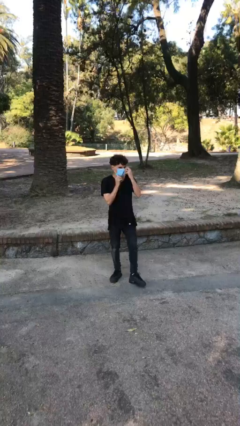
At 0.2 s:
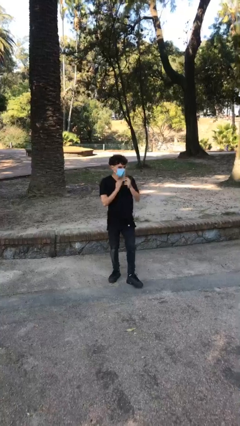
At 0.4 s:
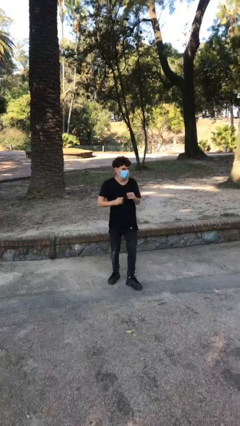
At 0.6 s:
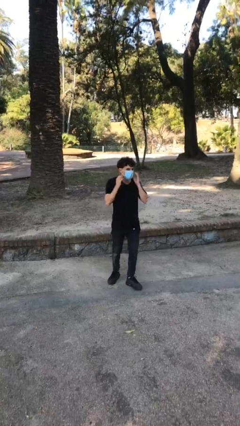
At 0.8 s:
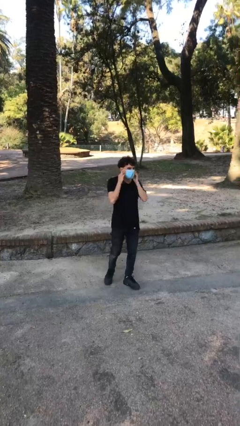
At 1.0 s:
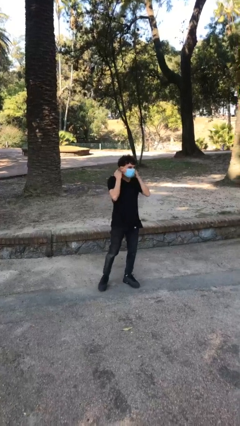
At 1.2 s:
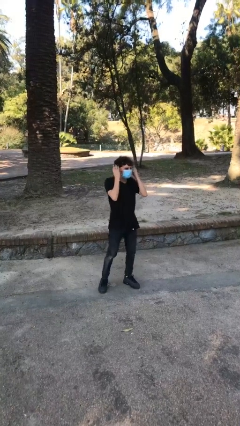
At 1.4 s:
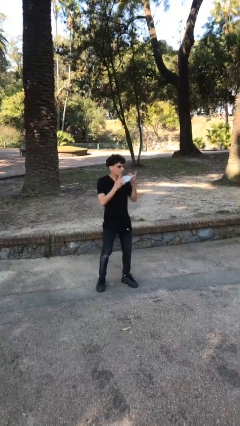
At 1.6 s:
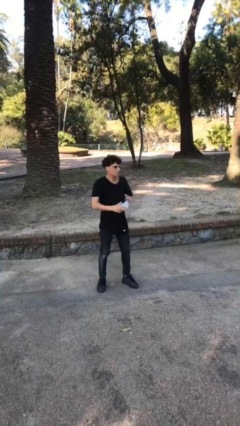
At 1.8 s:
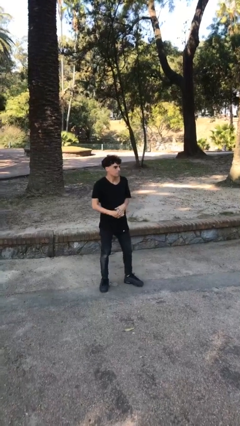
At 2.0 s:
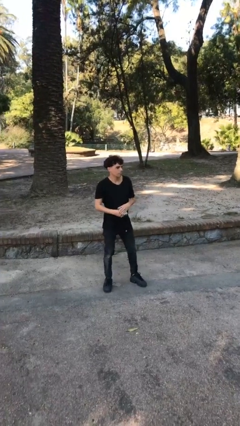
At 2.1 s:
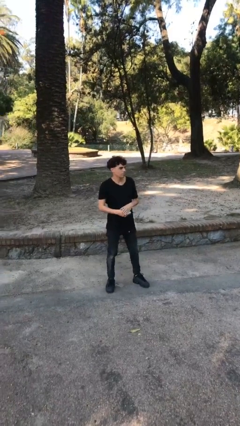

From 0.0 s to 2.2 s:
person takes off facemask

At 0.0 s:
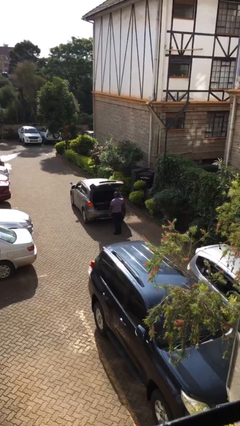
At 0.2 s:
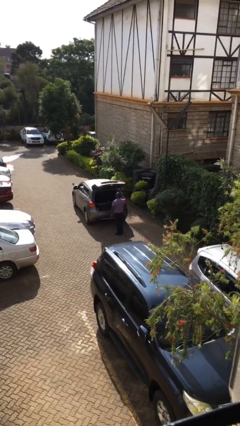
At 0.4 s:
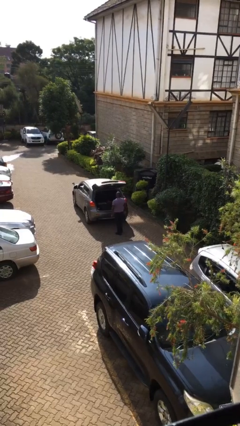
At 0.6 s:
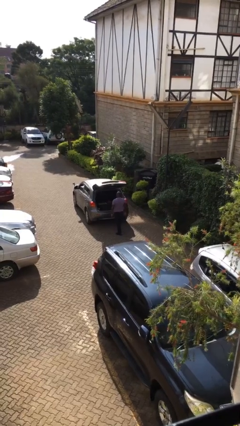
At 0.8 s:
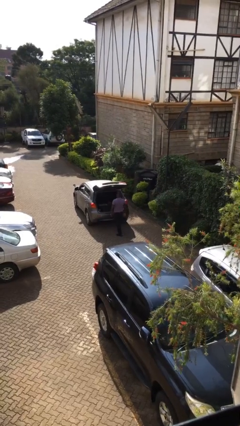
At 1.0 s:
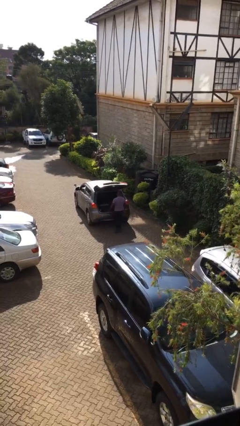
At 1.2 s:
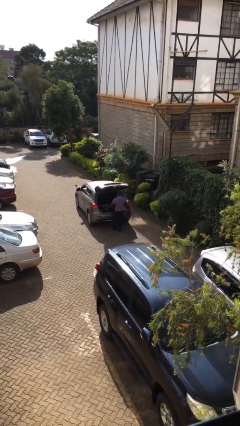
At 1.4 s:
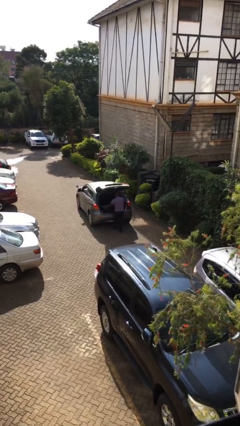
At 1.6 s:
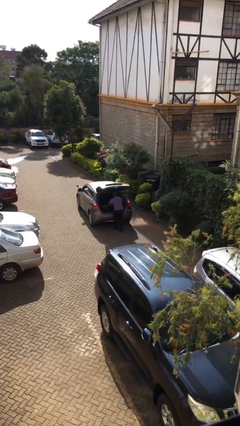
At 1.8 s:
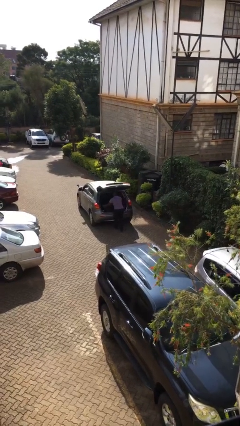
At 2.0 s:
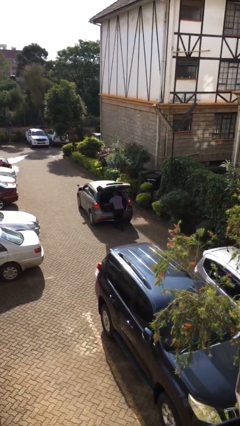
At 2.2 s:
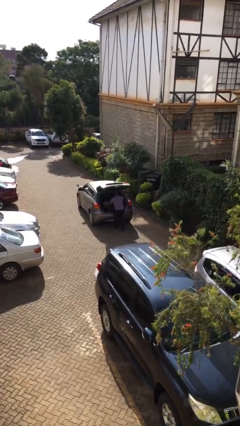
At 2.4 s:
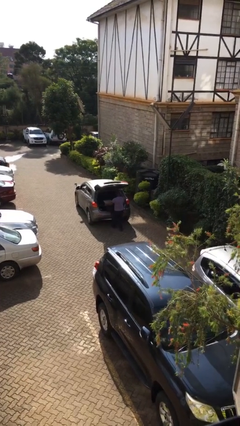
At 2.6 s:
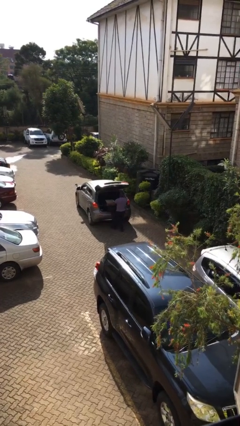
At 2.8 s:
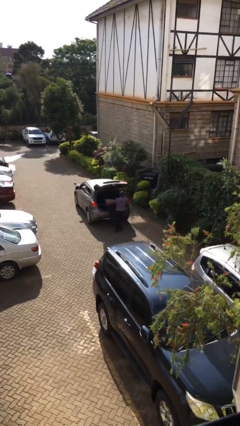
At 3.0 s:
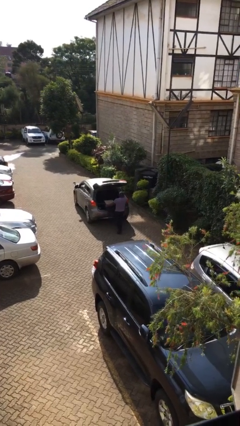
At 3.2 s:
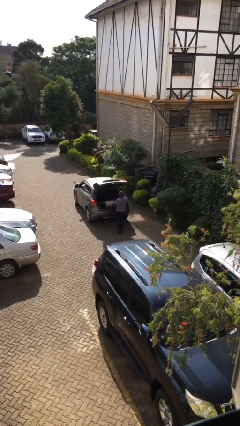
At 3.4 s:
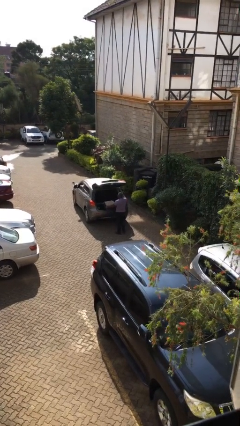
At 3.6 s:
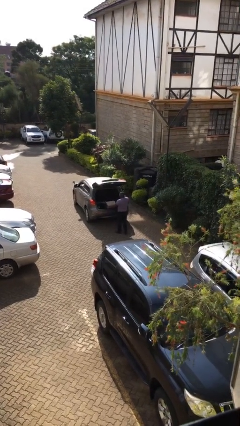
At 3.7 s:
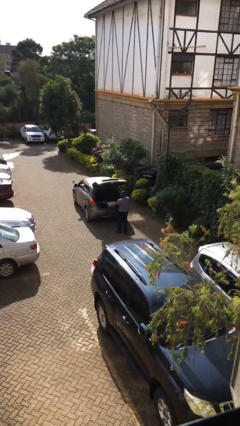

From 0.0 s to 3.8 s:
person unloads car

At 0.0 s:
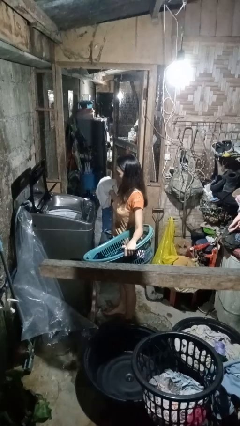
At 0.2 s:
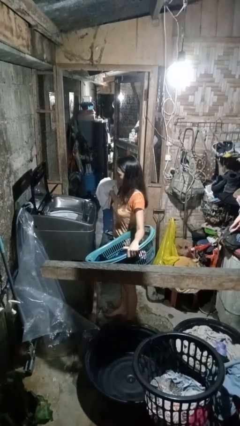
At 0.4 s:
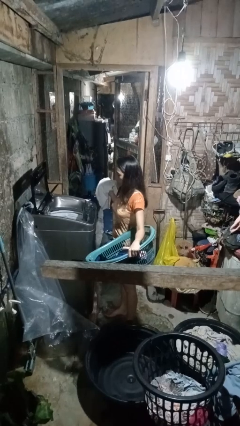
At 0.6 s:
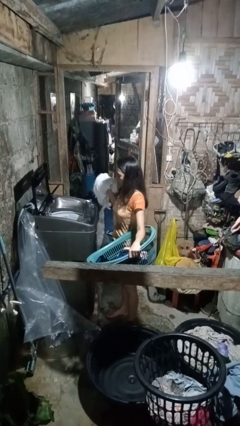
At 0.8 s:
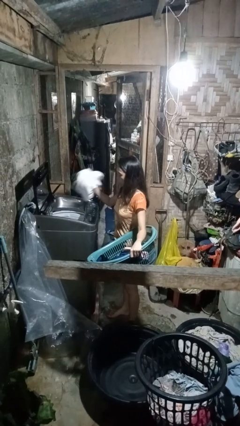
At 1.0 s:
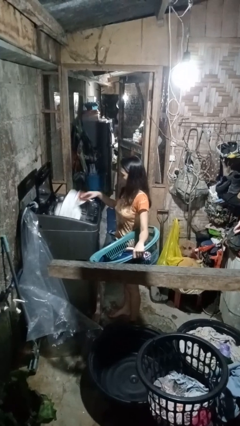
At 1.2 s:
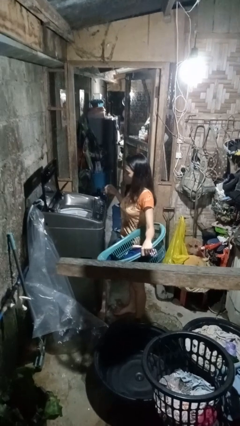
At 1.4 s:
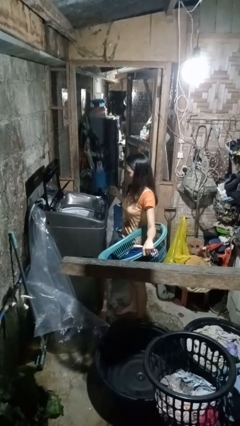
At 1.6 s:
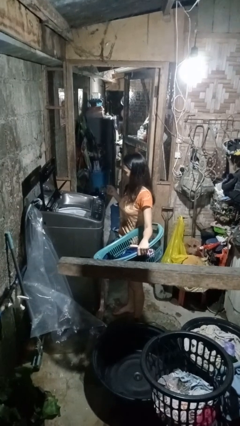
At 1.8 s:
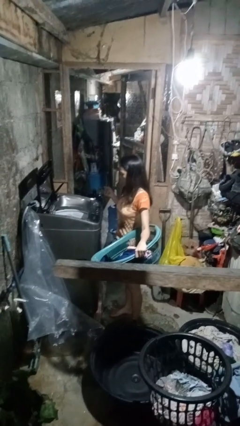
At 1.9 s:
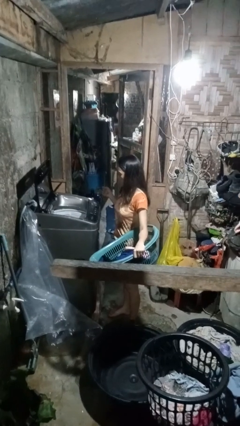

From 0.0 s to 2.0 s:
person loads clotheswasher

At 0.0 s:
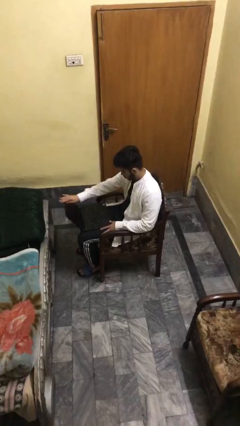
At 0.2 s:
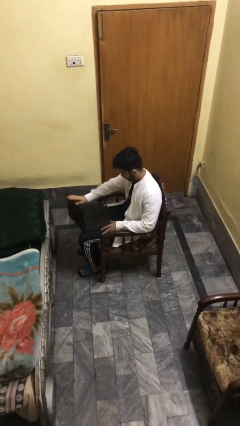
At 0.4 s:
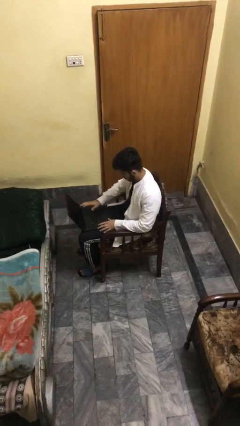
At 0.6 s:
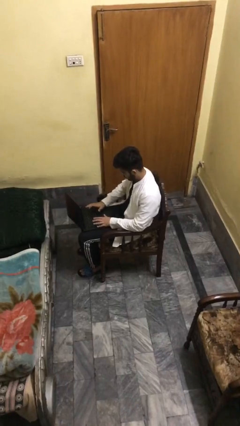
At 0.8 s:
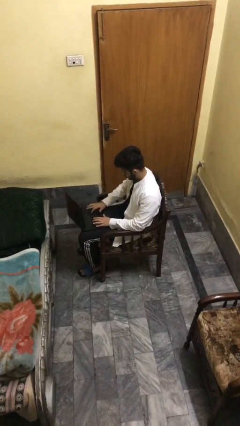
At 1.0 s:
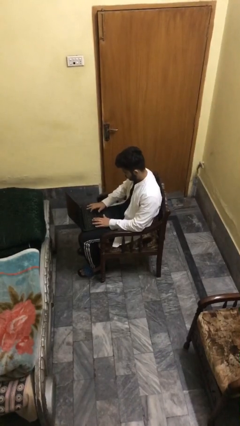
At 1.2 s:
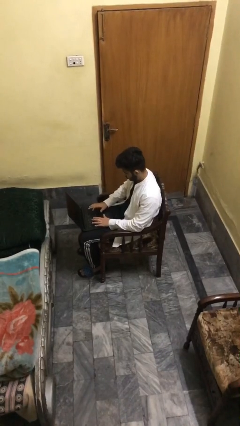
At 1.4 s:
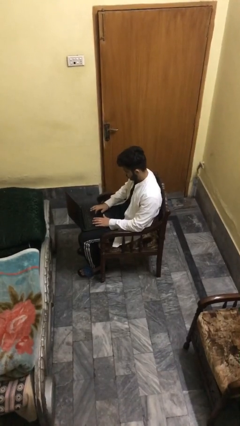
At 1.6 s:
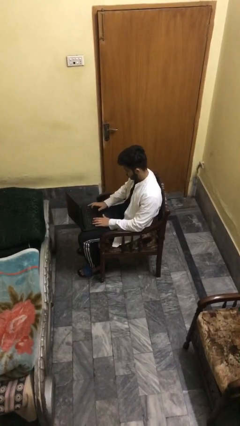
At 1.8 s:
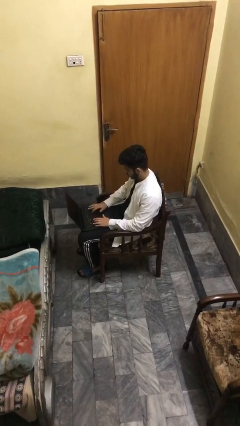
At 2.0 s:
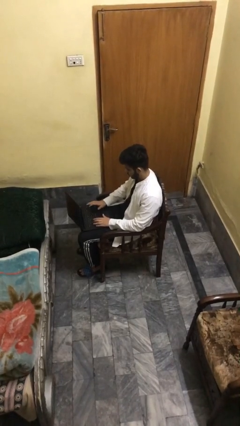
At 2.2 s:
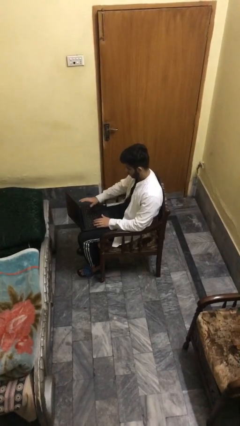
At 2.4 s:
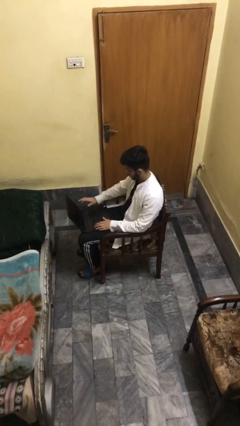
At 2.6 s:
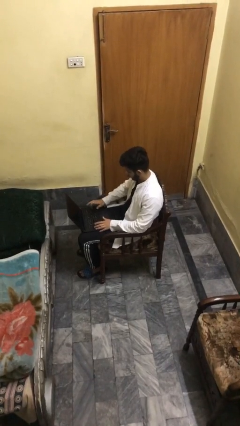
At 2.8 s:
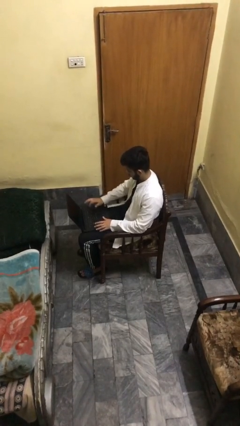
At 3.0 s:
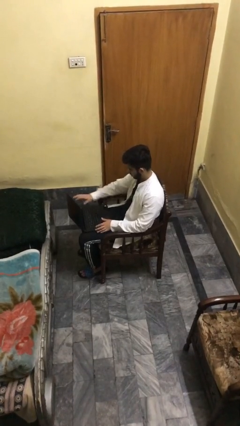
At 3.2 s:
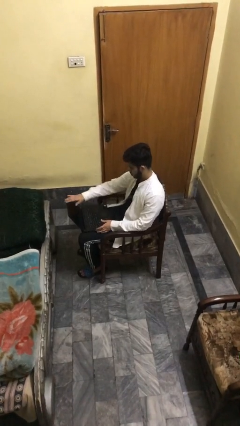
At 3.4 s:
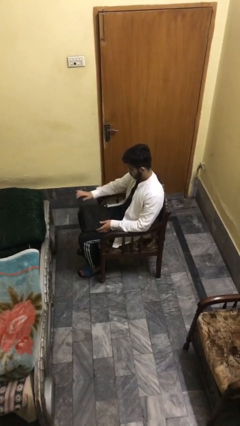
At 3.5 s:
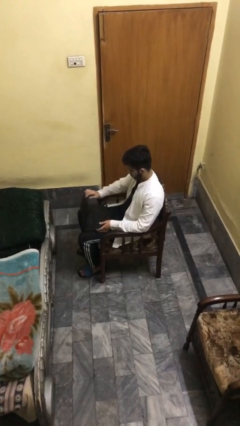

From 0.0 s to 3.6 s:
person interacts with laptop

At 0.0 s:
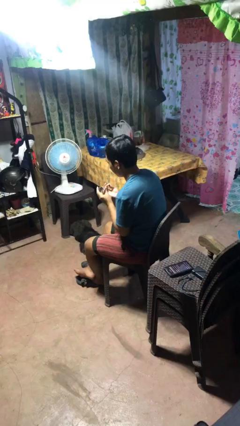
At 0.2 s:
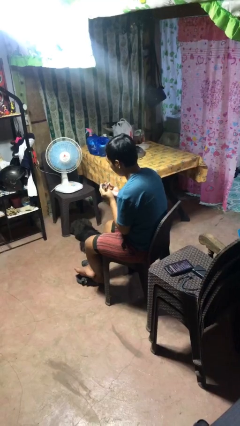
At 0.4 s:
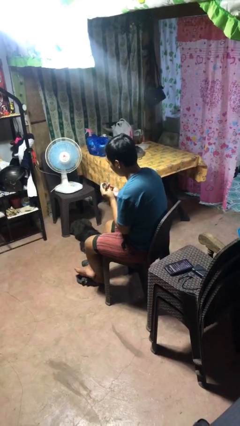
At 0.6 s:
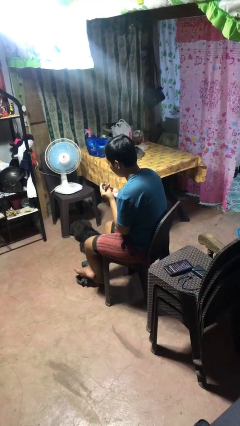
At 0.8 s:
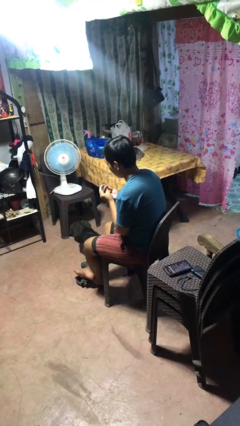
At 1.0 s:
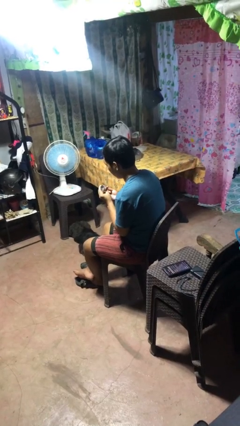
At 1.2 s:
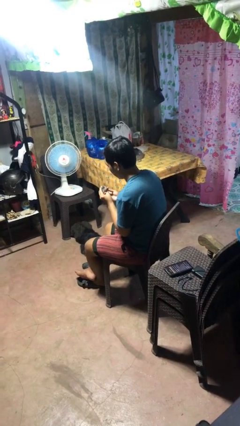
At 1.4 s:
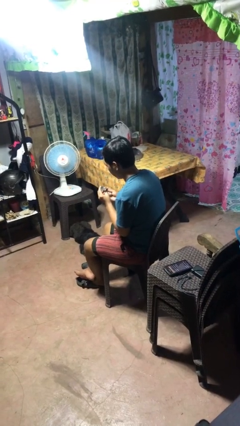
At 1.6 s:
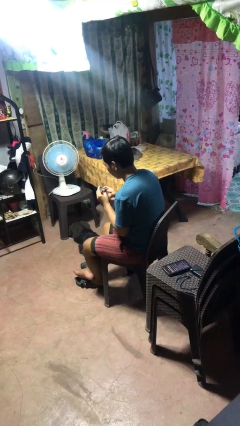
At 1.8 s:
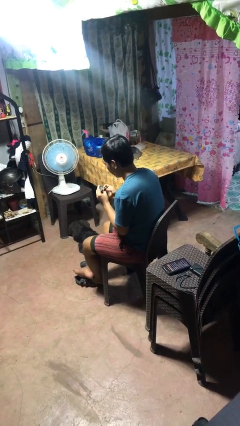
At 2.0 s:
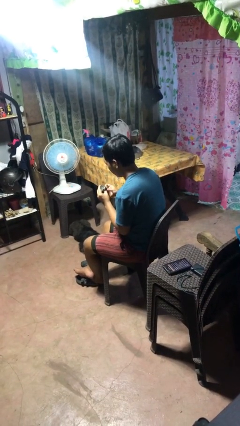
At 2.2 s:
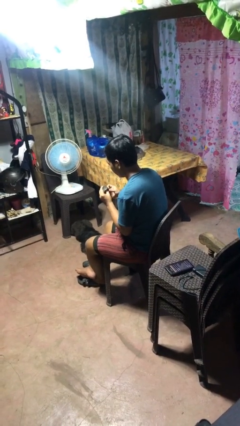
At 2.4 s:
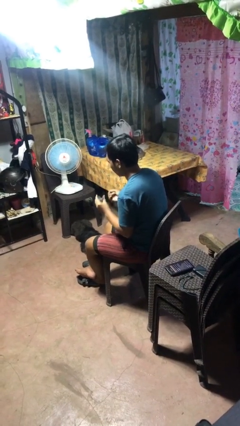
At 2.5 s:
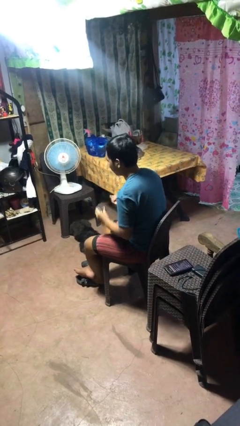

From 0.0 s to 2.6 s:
person clips fingernails

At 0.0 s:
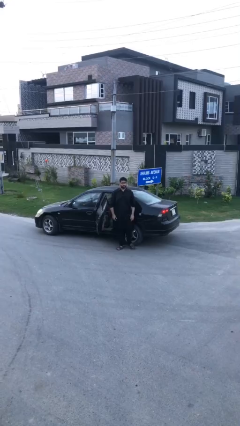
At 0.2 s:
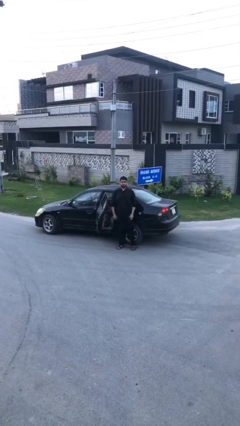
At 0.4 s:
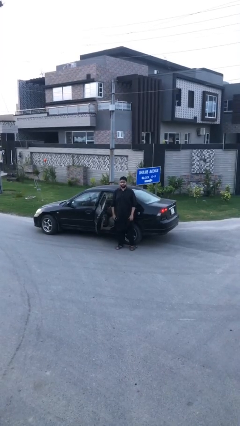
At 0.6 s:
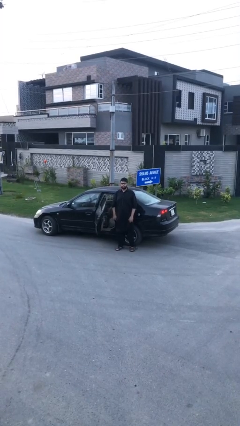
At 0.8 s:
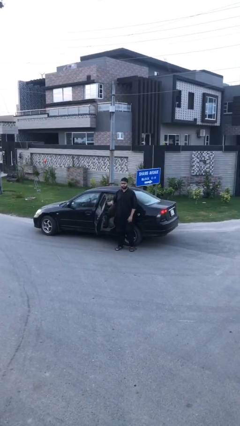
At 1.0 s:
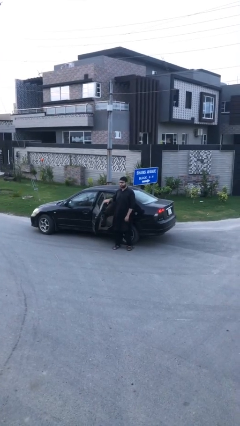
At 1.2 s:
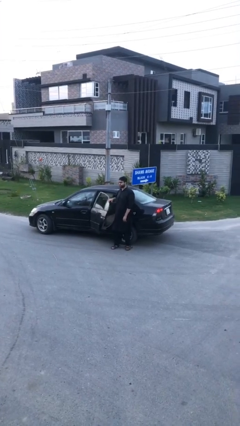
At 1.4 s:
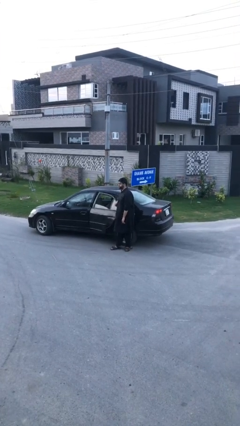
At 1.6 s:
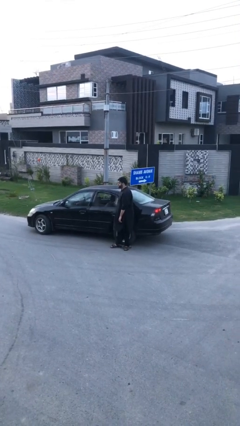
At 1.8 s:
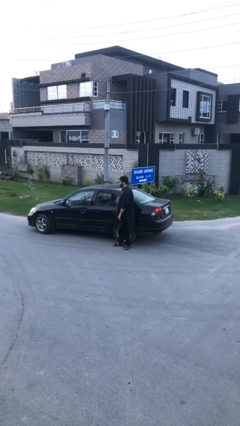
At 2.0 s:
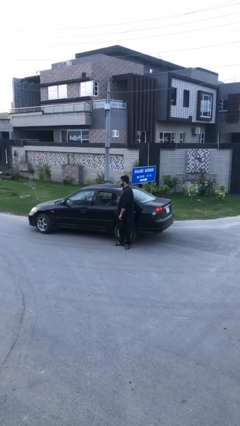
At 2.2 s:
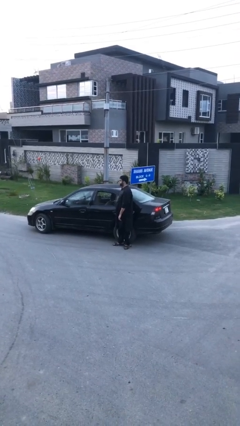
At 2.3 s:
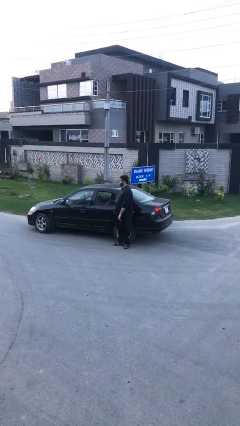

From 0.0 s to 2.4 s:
person closes car door

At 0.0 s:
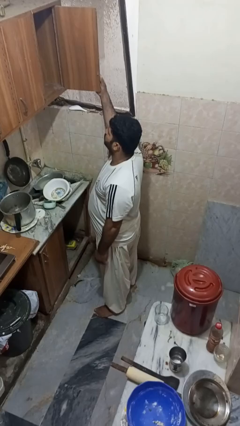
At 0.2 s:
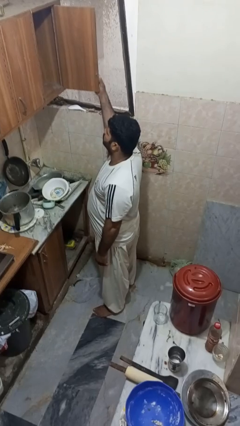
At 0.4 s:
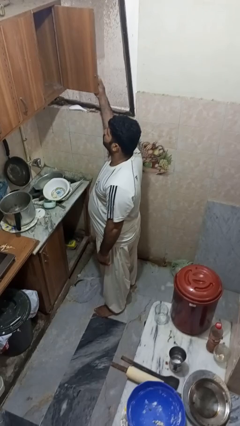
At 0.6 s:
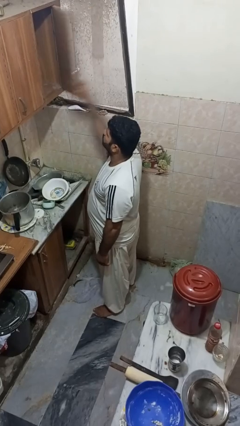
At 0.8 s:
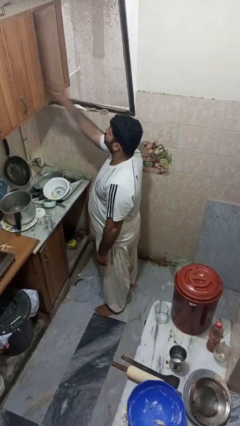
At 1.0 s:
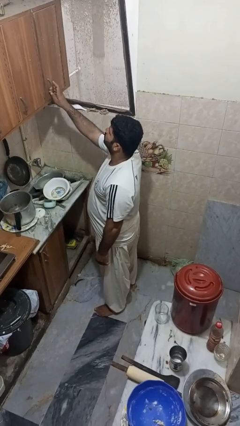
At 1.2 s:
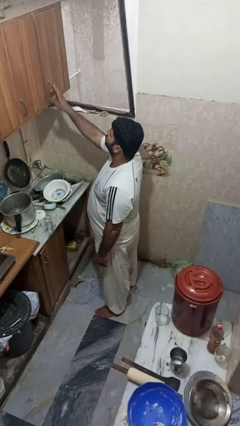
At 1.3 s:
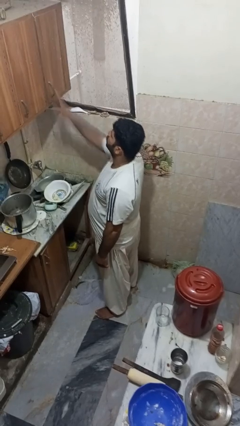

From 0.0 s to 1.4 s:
person closes cabinet
